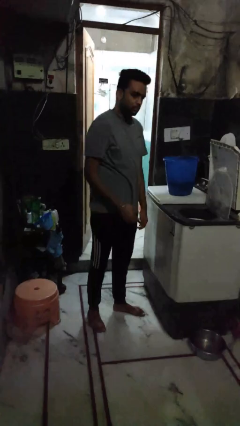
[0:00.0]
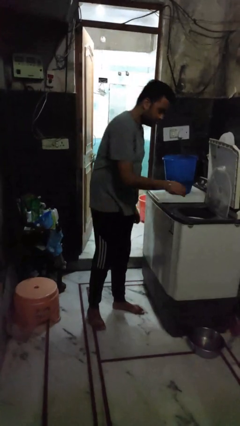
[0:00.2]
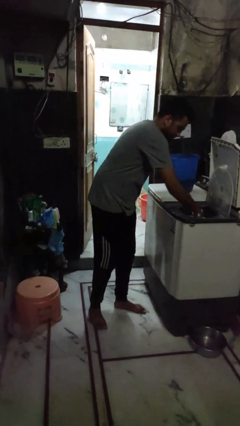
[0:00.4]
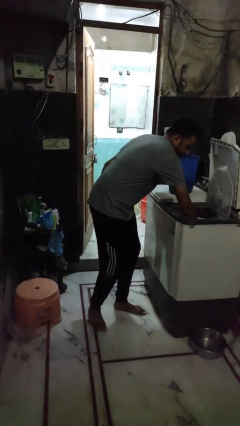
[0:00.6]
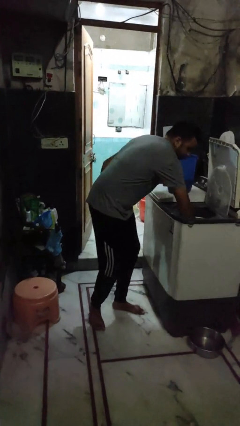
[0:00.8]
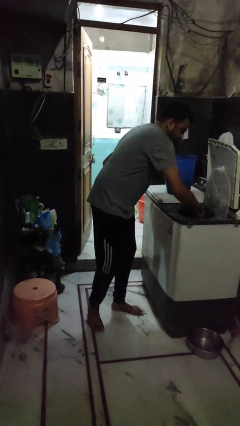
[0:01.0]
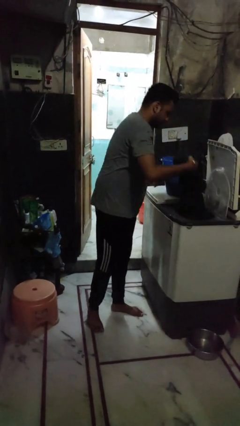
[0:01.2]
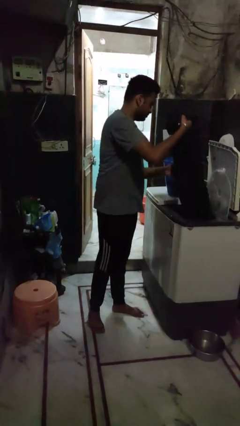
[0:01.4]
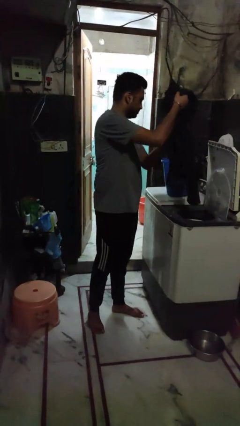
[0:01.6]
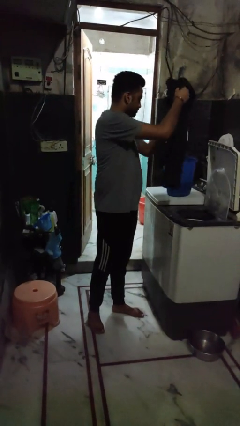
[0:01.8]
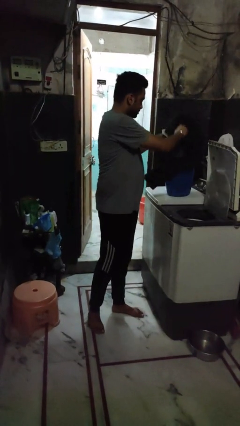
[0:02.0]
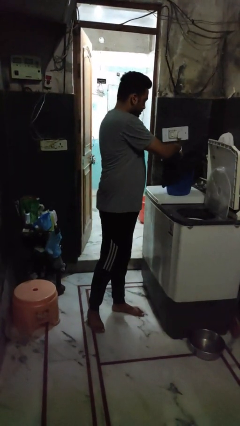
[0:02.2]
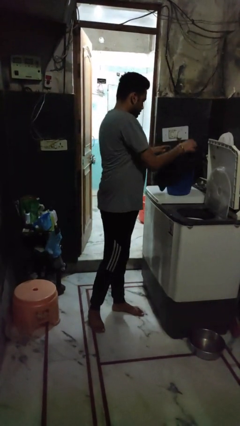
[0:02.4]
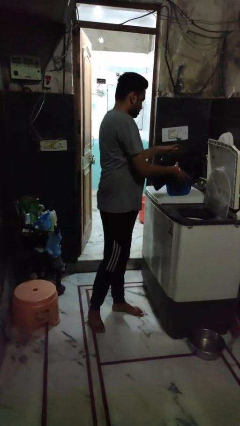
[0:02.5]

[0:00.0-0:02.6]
person unloads dryer

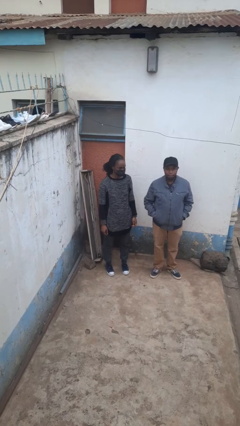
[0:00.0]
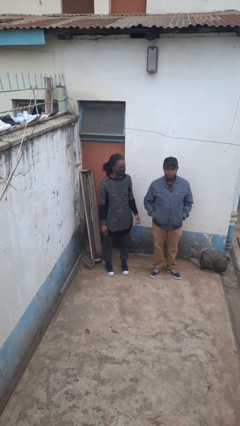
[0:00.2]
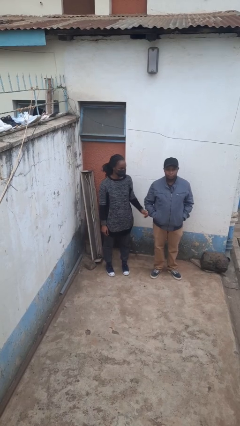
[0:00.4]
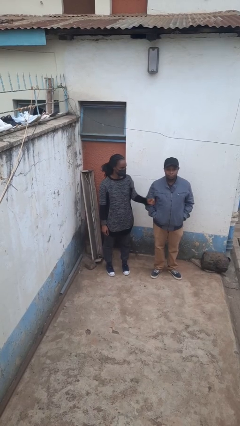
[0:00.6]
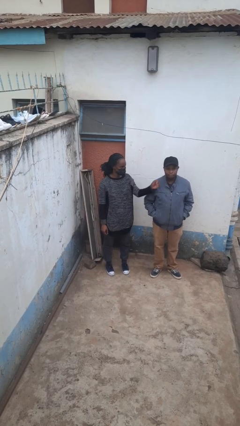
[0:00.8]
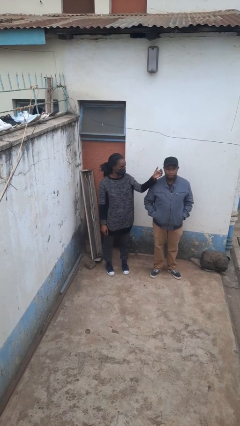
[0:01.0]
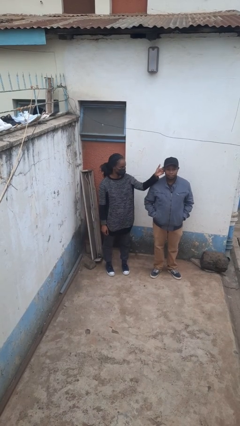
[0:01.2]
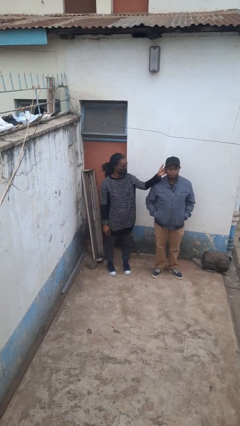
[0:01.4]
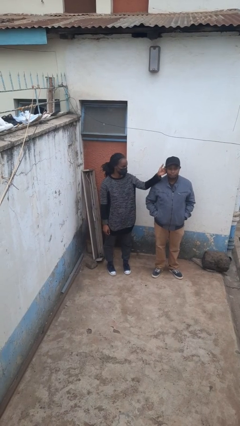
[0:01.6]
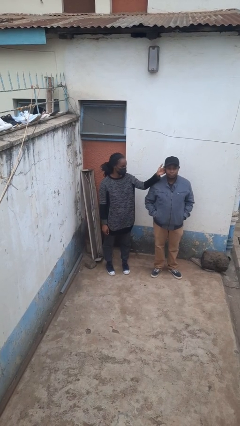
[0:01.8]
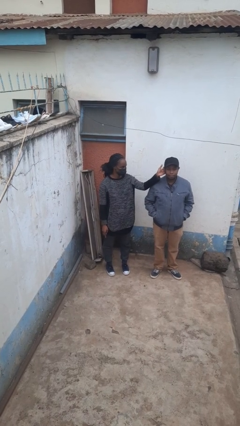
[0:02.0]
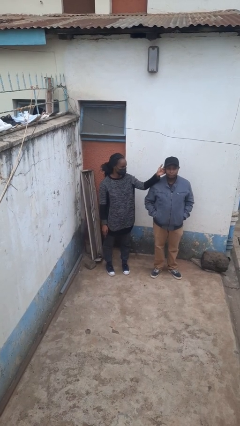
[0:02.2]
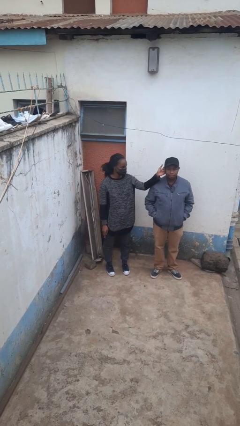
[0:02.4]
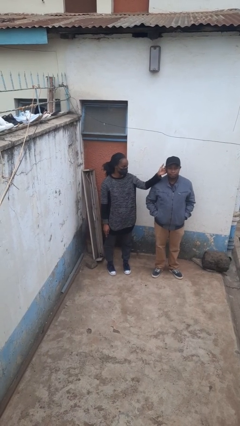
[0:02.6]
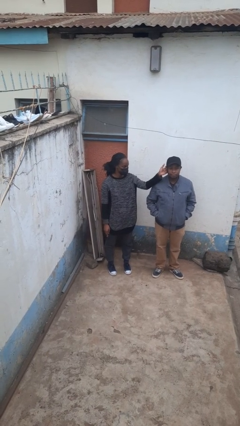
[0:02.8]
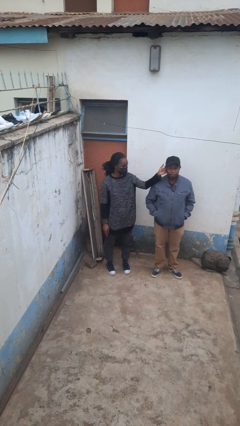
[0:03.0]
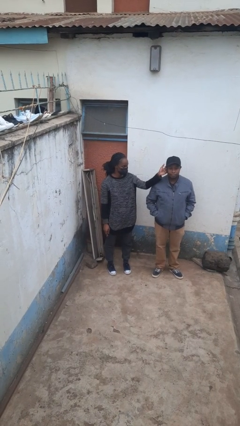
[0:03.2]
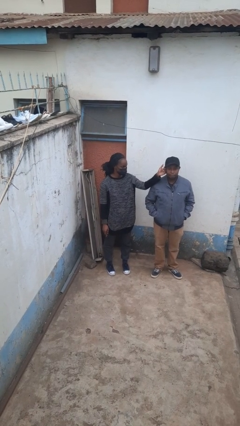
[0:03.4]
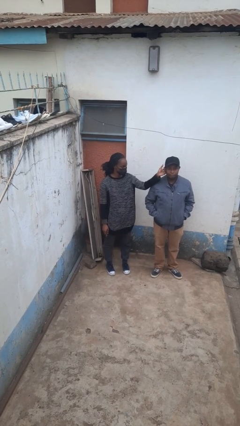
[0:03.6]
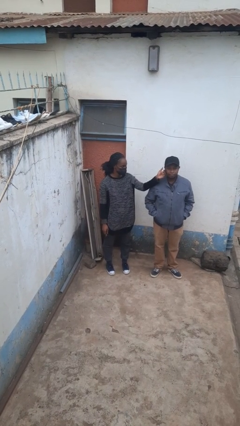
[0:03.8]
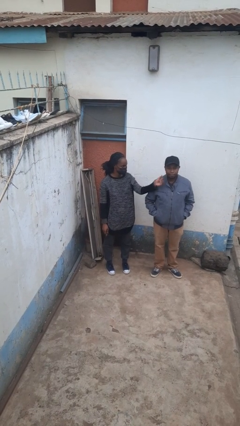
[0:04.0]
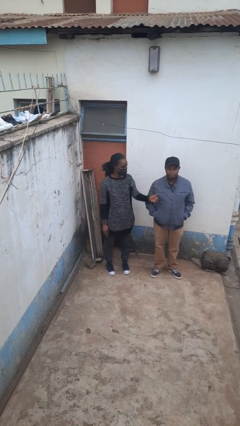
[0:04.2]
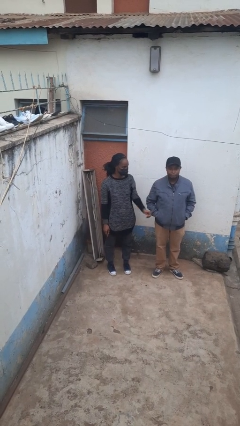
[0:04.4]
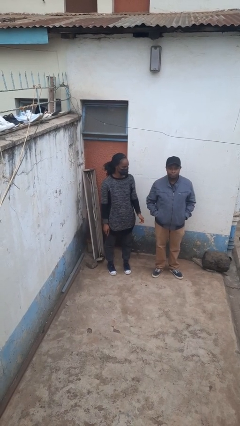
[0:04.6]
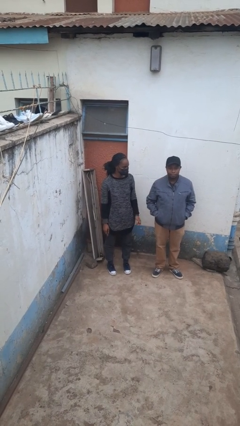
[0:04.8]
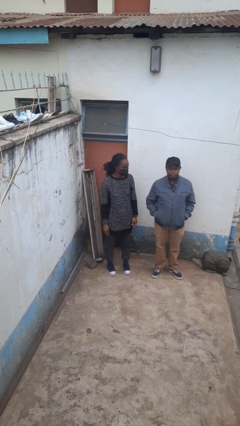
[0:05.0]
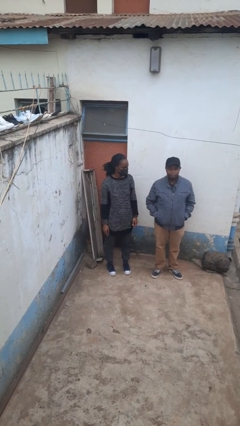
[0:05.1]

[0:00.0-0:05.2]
person touches face of person

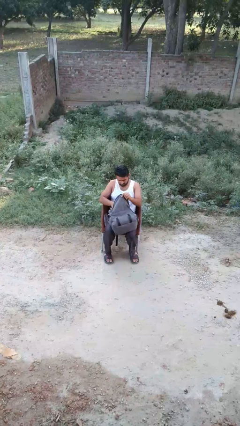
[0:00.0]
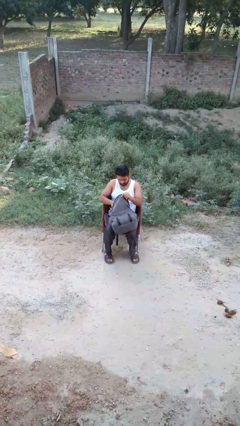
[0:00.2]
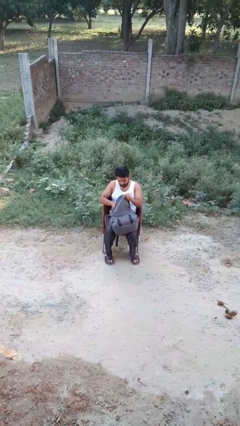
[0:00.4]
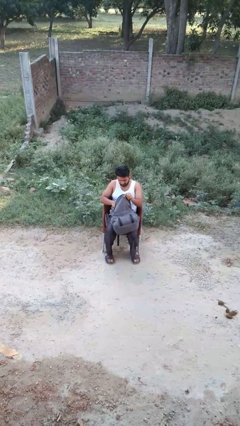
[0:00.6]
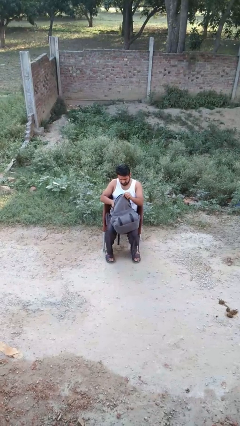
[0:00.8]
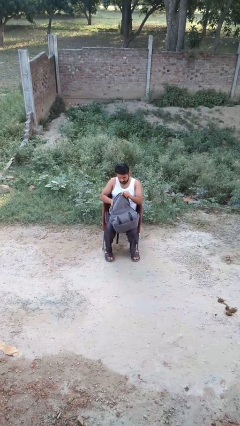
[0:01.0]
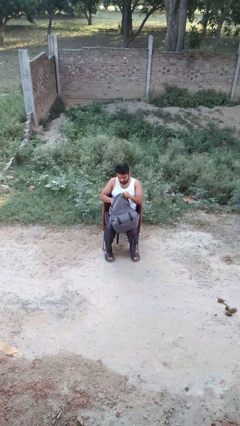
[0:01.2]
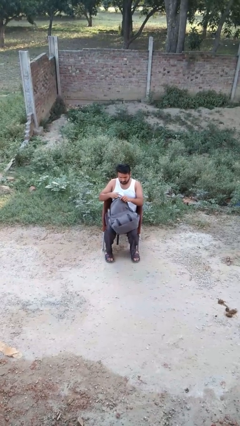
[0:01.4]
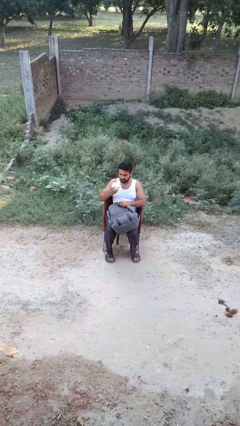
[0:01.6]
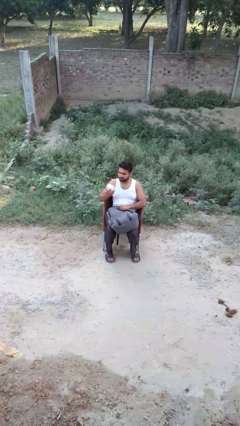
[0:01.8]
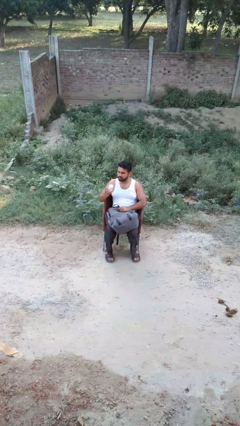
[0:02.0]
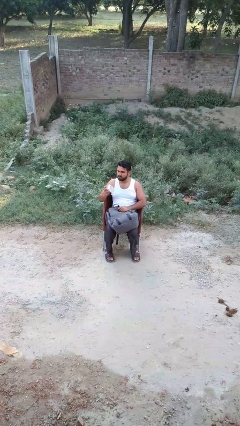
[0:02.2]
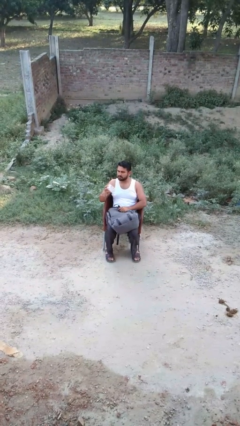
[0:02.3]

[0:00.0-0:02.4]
person takes object from backpack

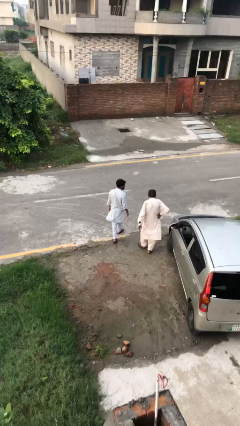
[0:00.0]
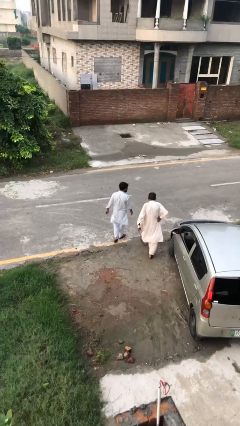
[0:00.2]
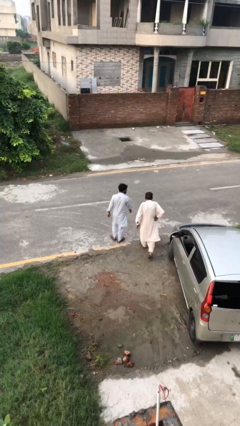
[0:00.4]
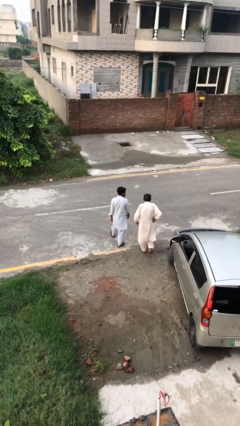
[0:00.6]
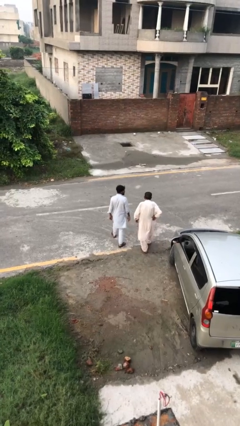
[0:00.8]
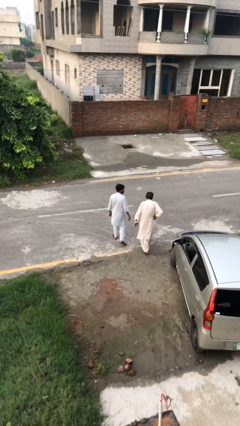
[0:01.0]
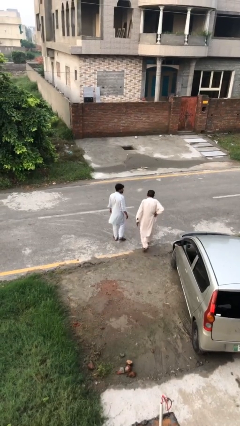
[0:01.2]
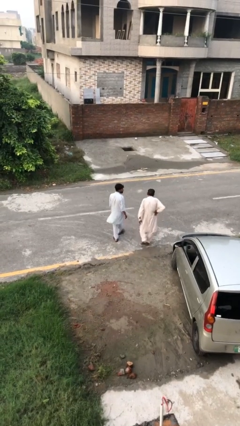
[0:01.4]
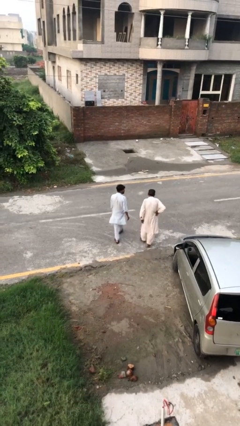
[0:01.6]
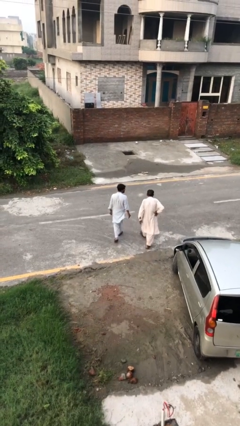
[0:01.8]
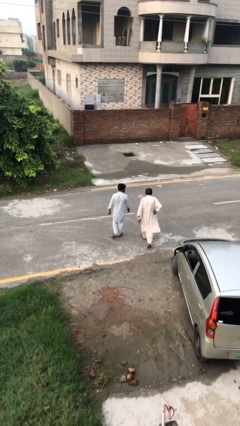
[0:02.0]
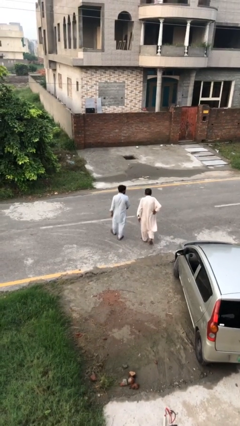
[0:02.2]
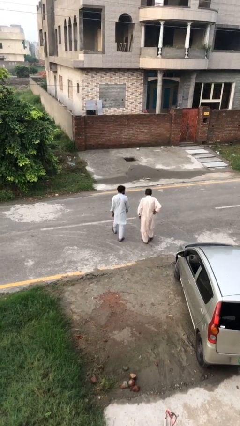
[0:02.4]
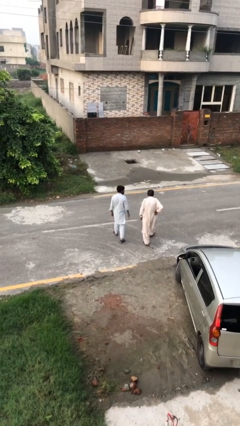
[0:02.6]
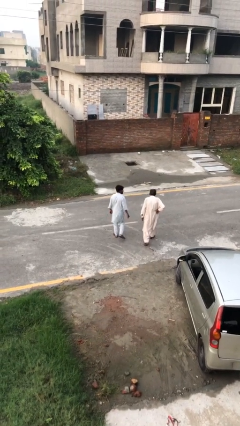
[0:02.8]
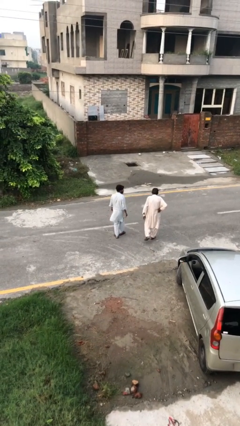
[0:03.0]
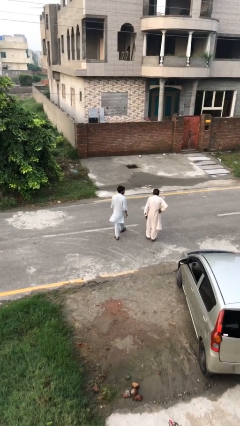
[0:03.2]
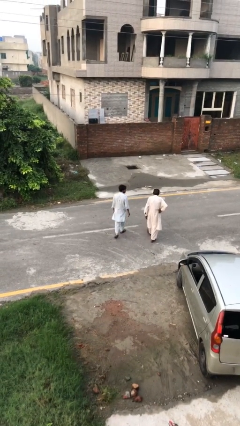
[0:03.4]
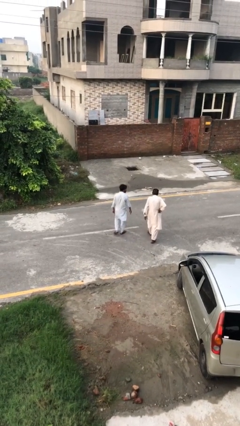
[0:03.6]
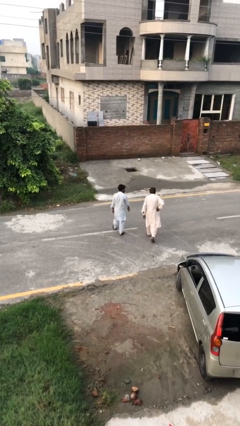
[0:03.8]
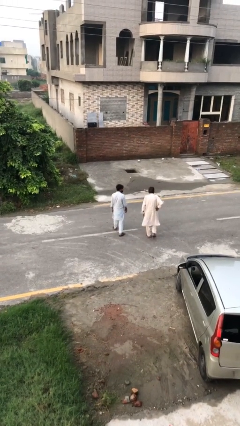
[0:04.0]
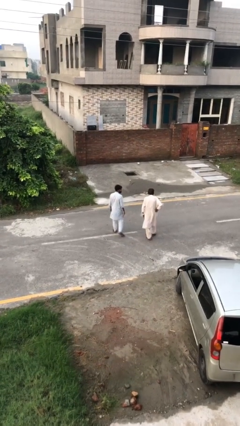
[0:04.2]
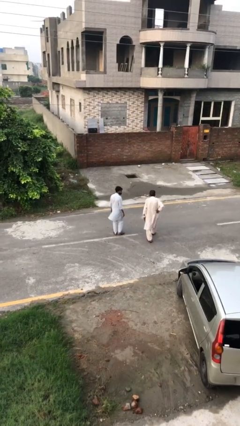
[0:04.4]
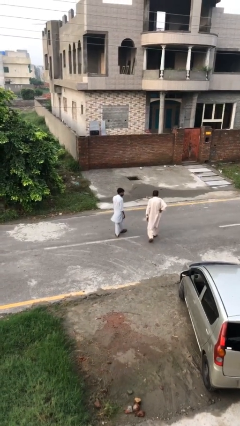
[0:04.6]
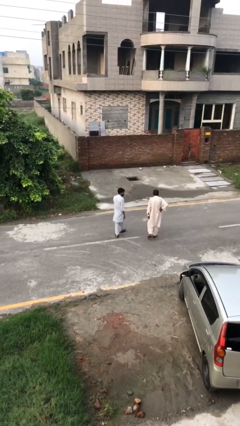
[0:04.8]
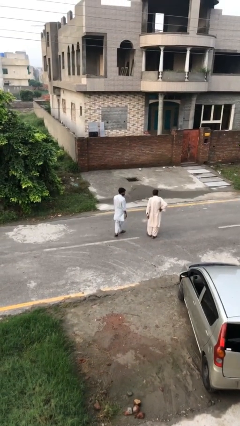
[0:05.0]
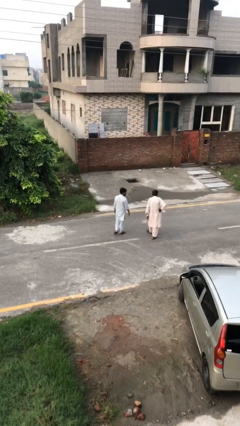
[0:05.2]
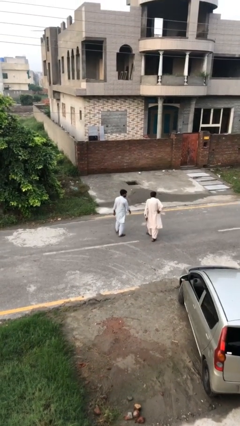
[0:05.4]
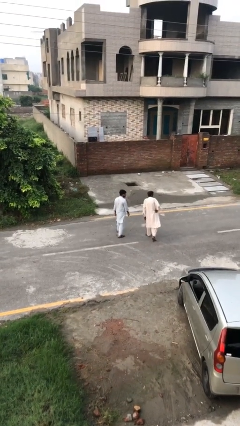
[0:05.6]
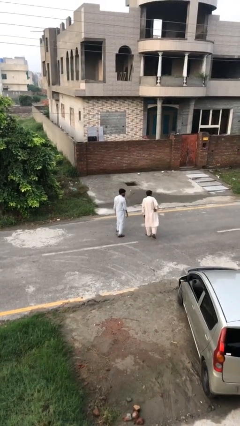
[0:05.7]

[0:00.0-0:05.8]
person talks to person

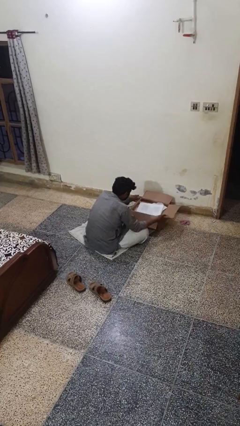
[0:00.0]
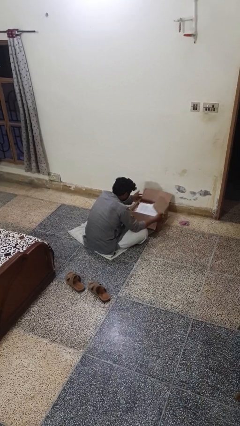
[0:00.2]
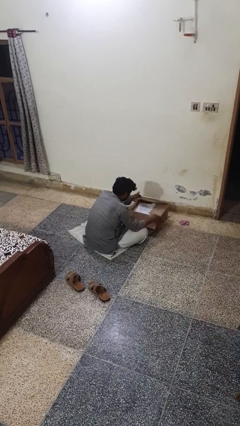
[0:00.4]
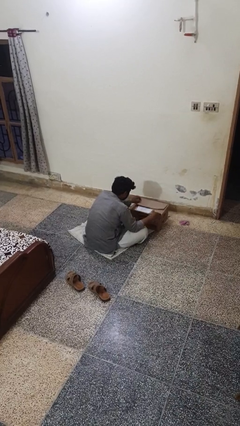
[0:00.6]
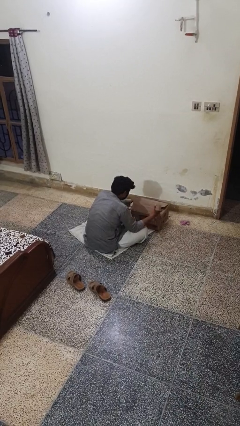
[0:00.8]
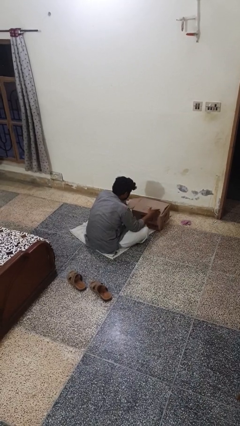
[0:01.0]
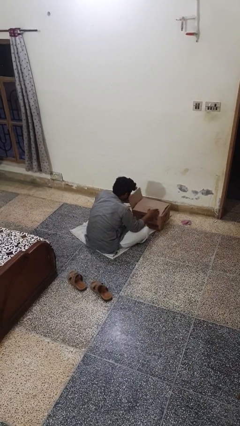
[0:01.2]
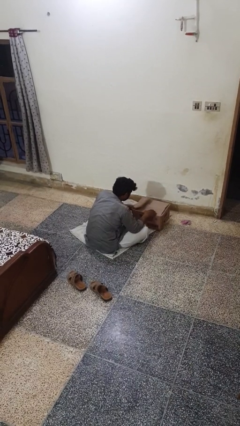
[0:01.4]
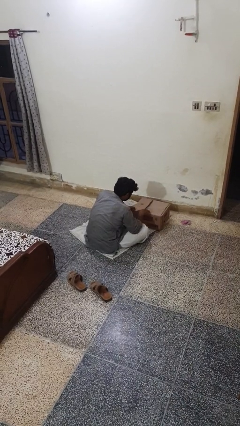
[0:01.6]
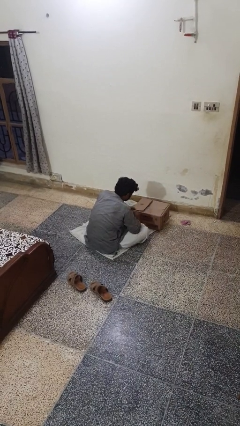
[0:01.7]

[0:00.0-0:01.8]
person closes box
